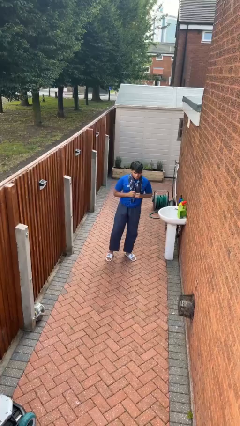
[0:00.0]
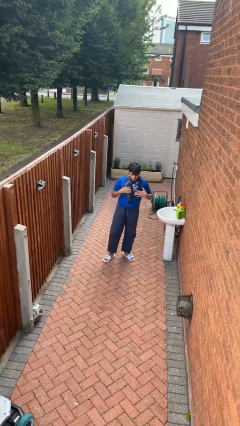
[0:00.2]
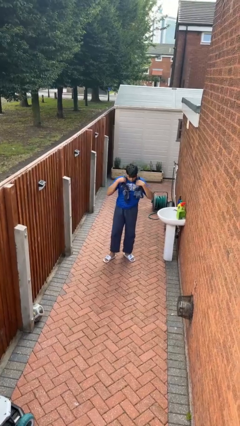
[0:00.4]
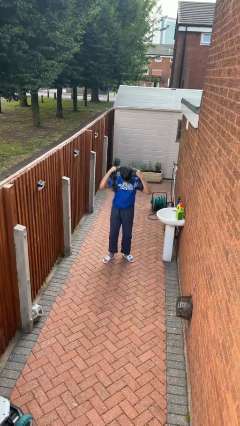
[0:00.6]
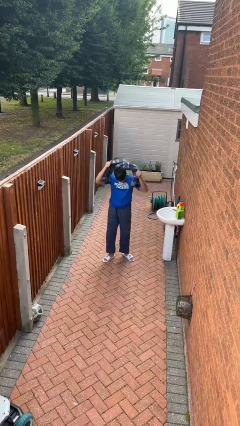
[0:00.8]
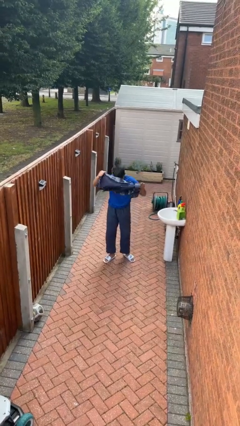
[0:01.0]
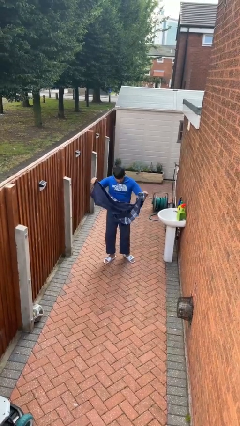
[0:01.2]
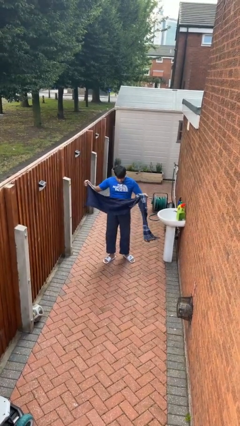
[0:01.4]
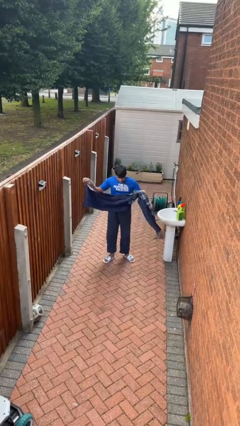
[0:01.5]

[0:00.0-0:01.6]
person takes off scarf

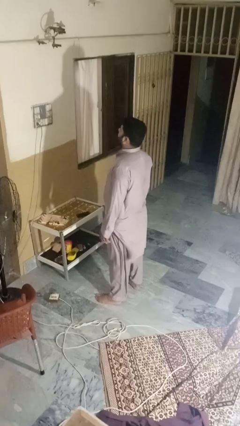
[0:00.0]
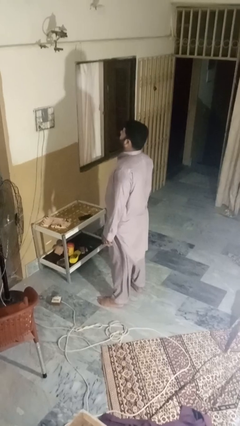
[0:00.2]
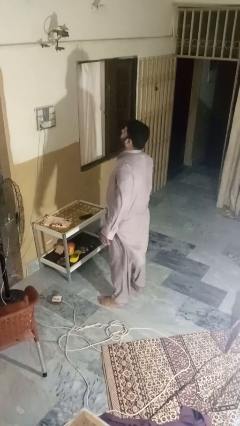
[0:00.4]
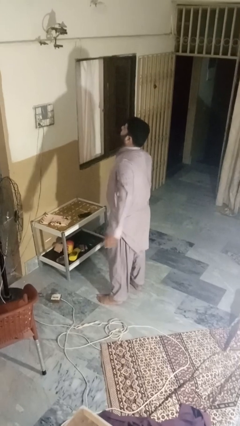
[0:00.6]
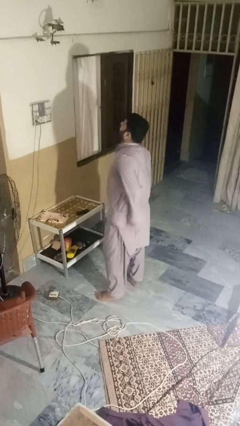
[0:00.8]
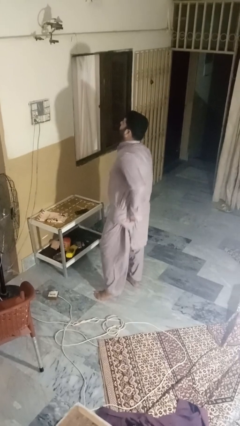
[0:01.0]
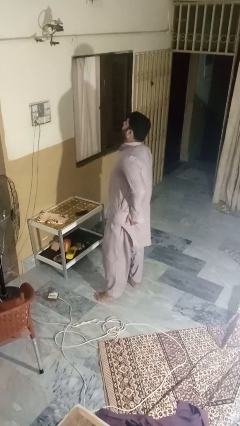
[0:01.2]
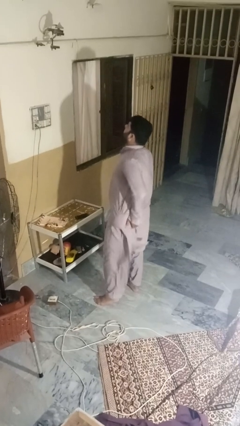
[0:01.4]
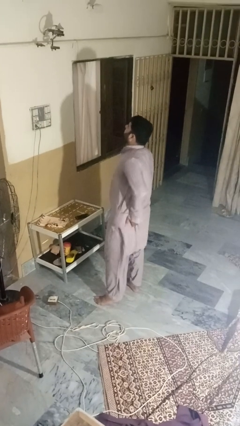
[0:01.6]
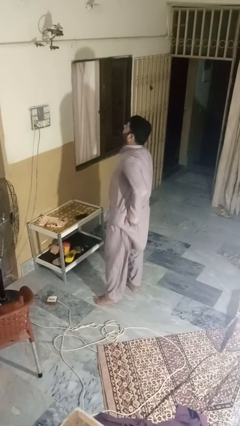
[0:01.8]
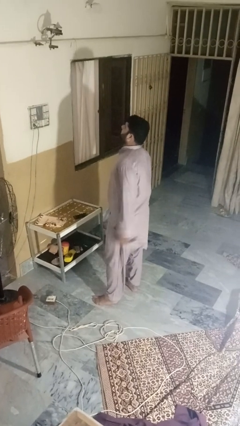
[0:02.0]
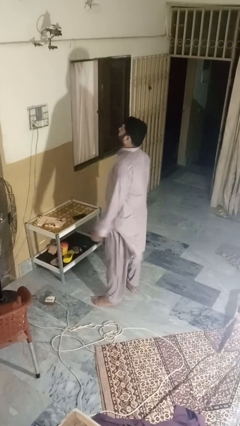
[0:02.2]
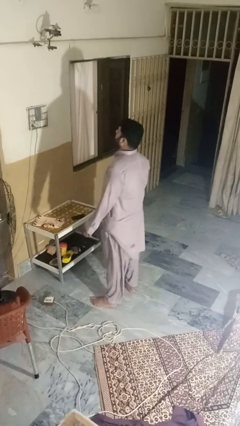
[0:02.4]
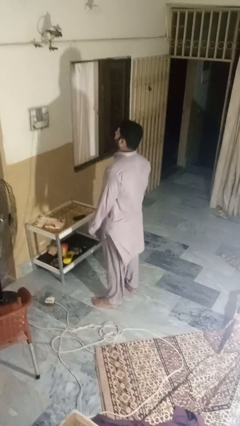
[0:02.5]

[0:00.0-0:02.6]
person wiggles hips

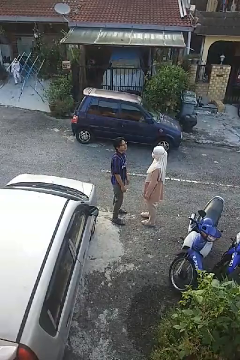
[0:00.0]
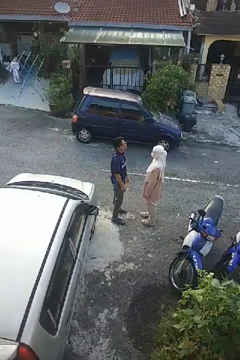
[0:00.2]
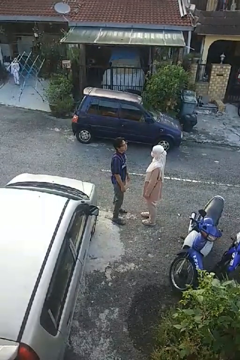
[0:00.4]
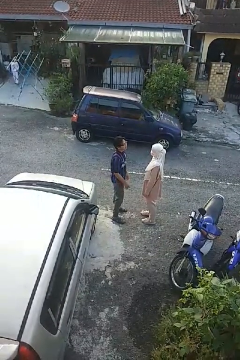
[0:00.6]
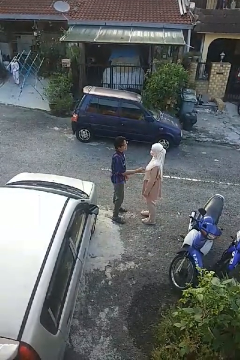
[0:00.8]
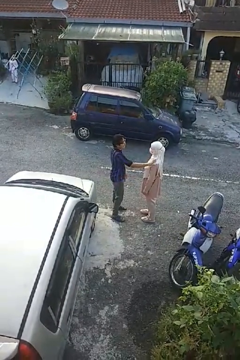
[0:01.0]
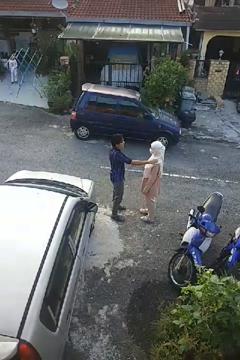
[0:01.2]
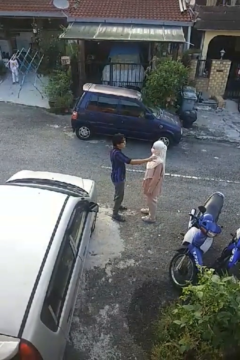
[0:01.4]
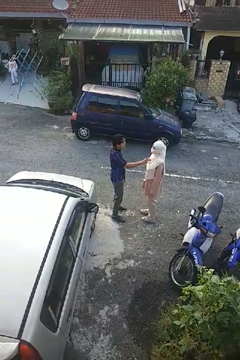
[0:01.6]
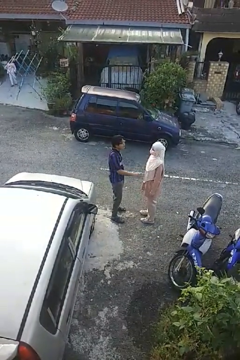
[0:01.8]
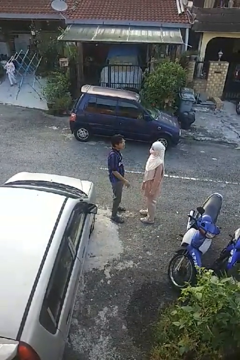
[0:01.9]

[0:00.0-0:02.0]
person shoves person

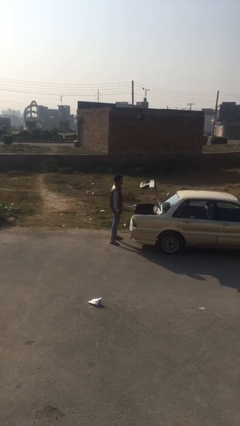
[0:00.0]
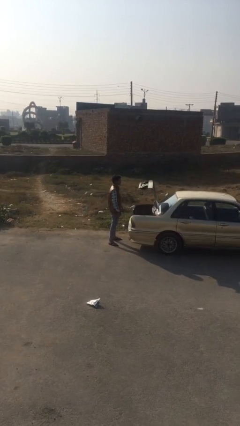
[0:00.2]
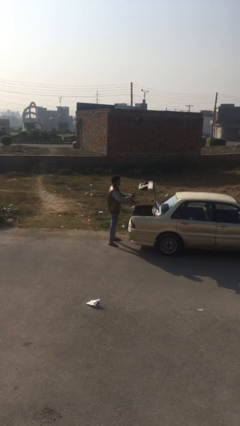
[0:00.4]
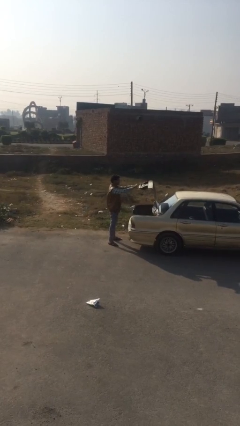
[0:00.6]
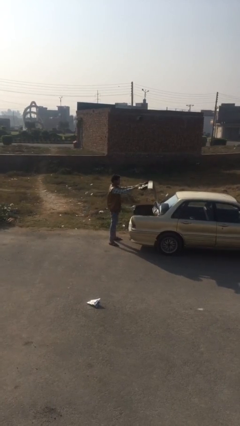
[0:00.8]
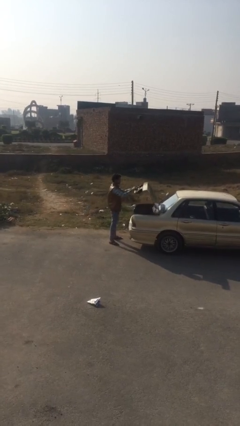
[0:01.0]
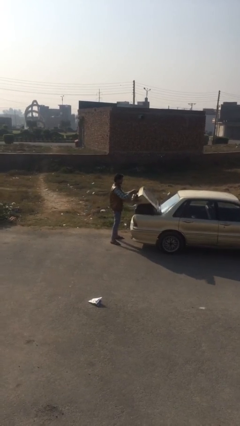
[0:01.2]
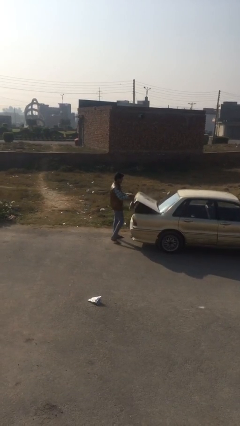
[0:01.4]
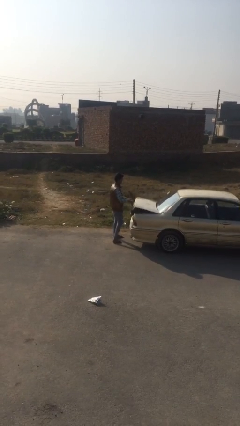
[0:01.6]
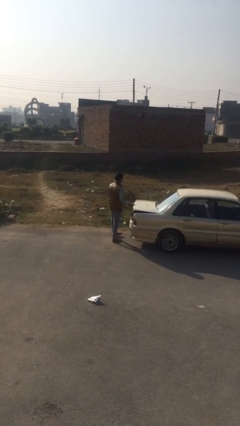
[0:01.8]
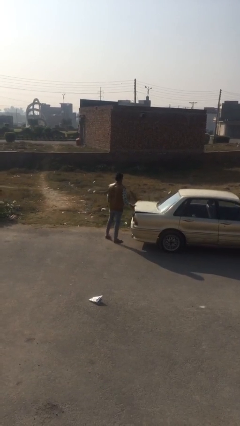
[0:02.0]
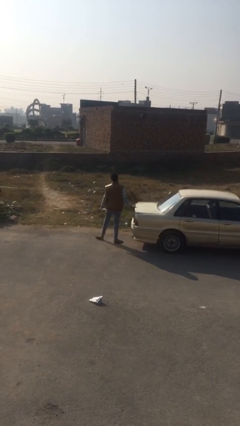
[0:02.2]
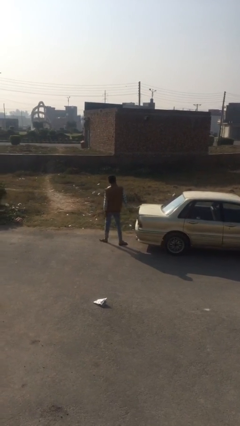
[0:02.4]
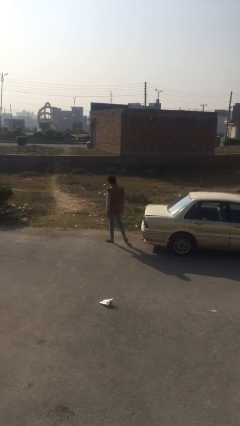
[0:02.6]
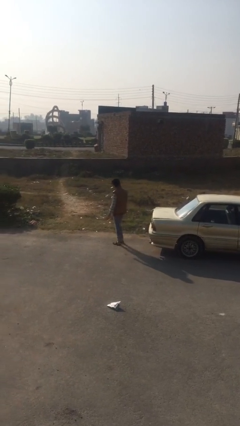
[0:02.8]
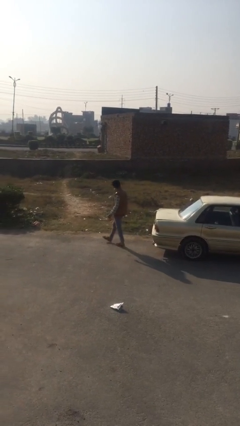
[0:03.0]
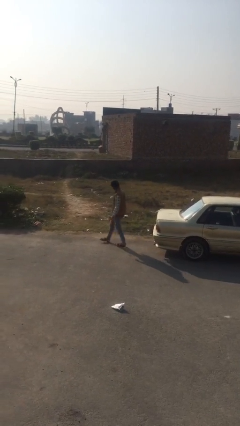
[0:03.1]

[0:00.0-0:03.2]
person closes car trunk

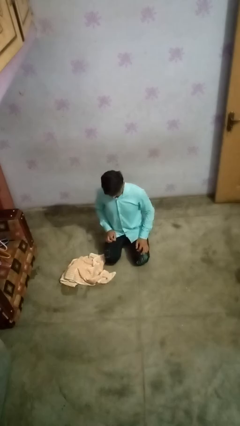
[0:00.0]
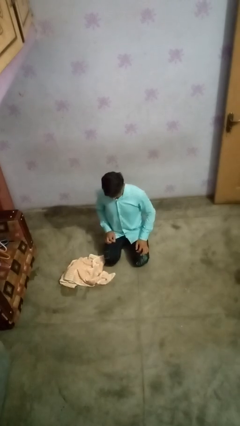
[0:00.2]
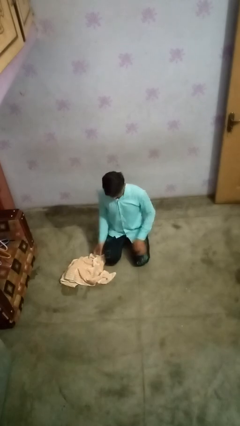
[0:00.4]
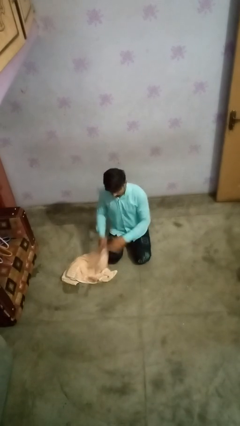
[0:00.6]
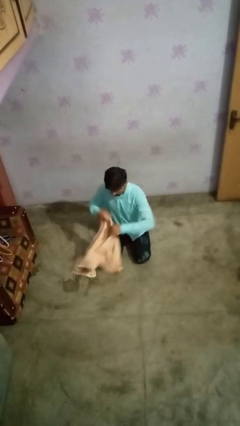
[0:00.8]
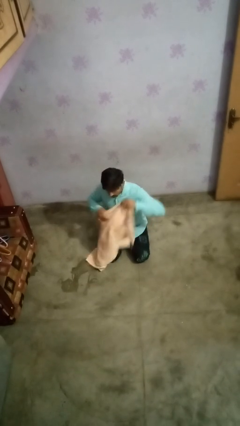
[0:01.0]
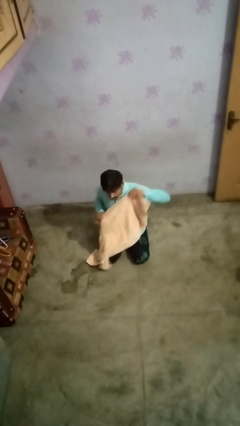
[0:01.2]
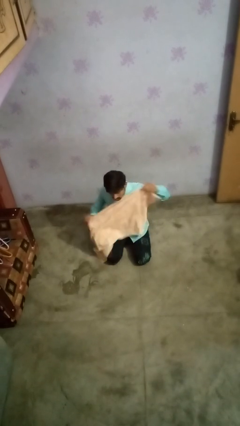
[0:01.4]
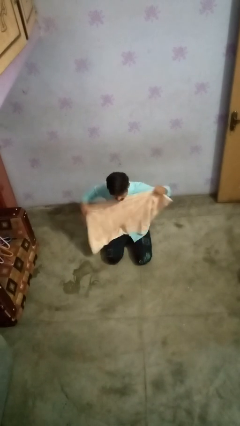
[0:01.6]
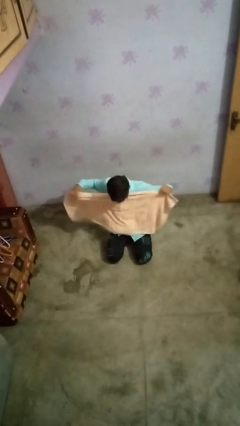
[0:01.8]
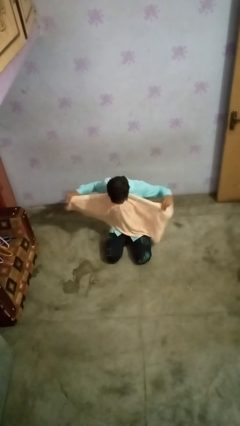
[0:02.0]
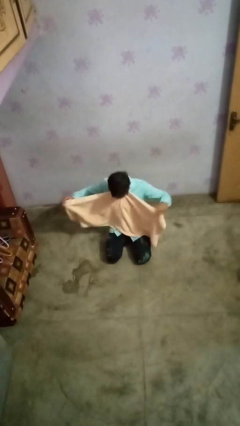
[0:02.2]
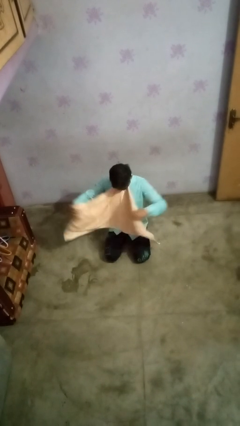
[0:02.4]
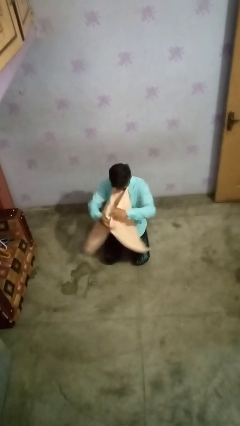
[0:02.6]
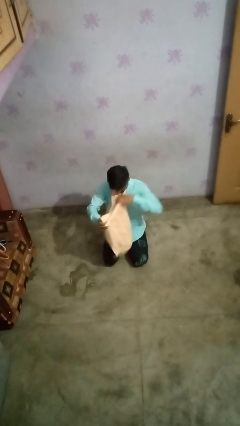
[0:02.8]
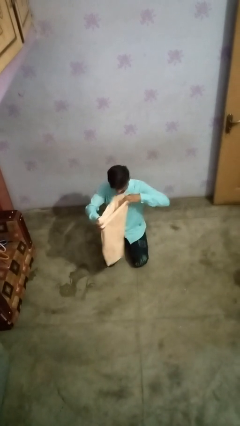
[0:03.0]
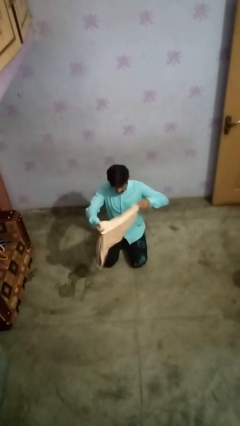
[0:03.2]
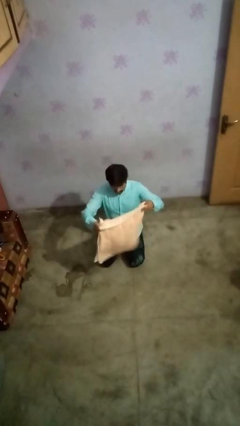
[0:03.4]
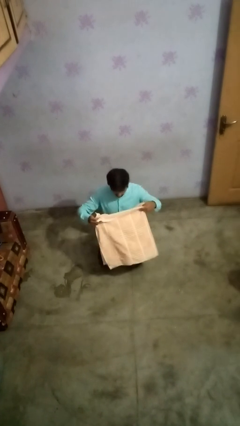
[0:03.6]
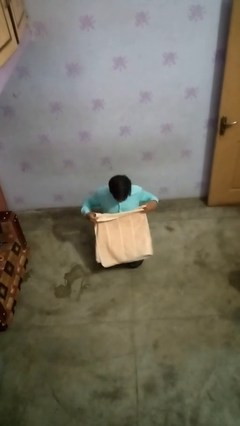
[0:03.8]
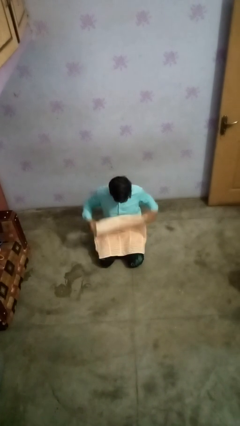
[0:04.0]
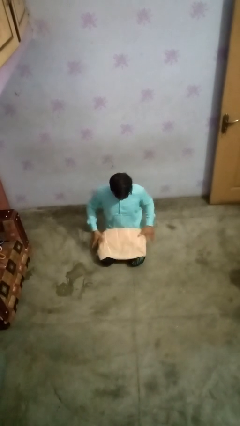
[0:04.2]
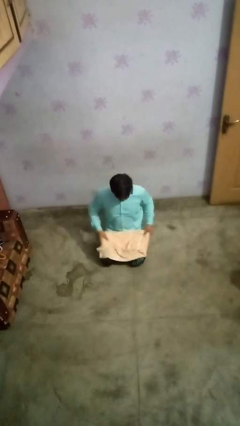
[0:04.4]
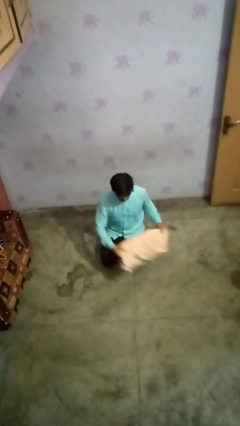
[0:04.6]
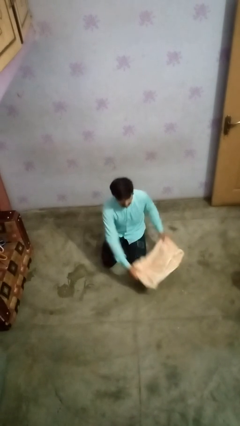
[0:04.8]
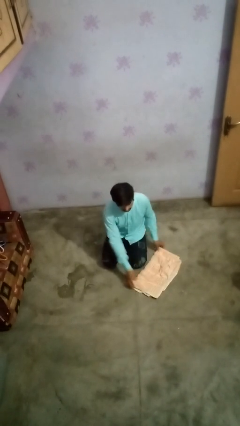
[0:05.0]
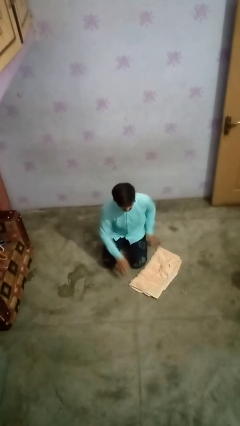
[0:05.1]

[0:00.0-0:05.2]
person folds towel

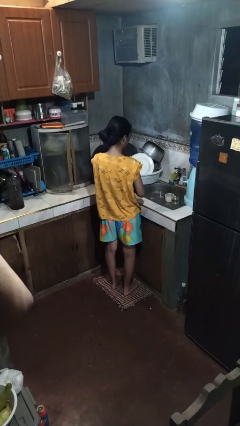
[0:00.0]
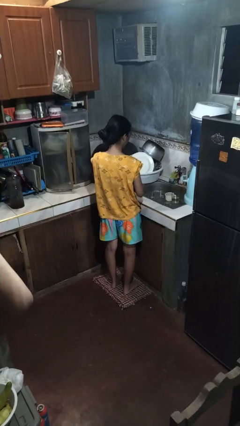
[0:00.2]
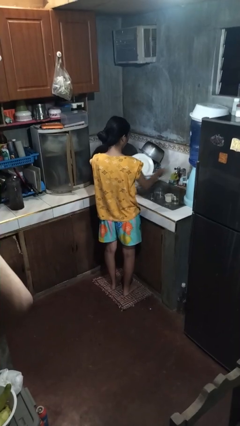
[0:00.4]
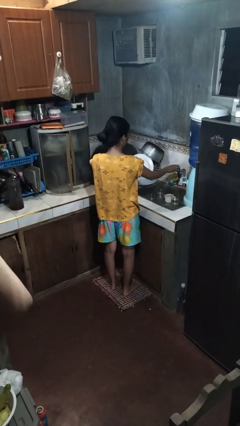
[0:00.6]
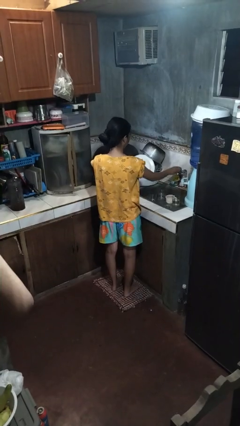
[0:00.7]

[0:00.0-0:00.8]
person turns on faucet

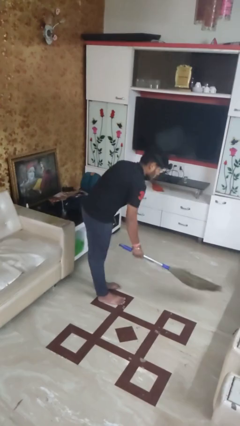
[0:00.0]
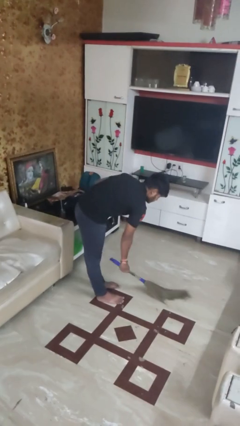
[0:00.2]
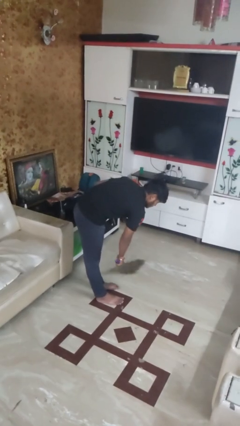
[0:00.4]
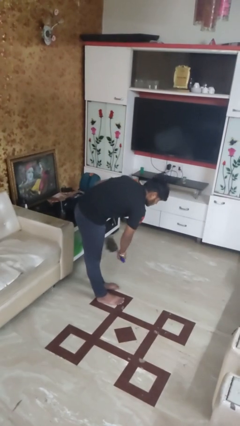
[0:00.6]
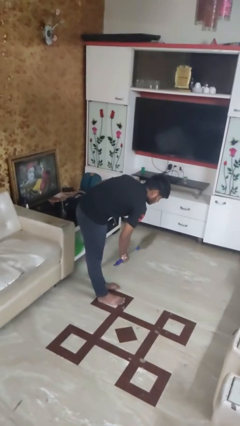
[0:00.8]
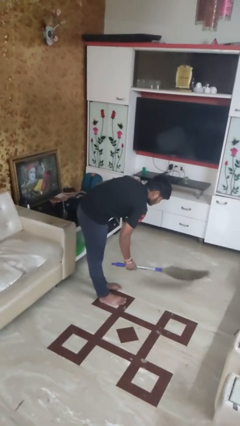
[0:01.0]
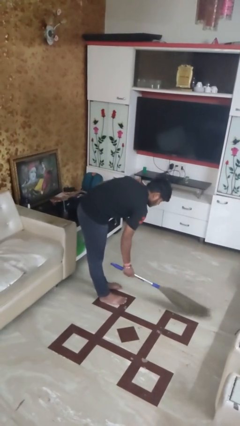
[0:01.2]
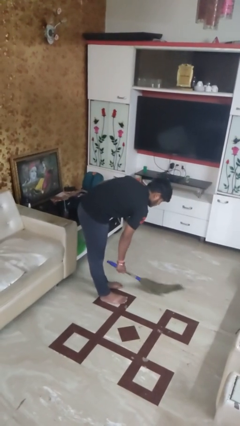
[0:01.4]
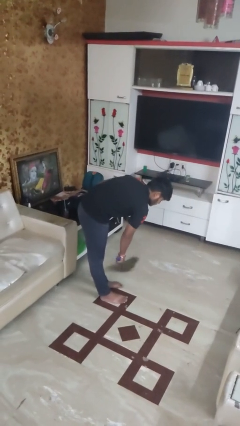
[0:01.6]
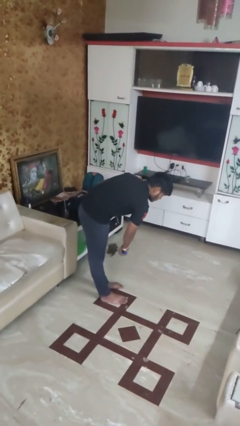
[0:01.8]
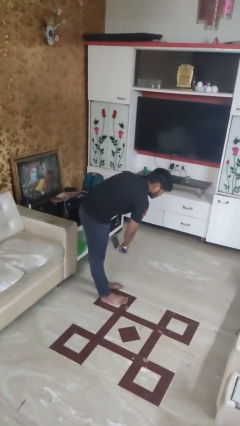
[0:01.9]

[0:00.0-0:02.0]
person sweeps floor
